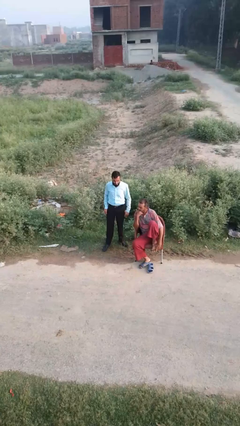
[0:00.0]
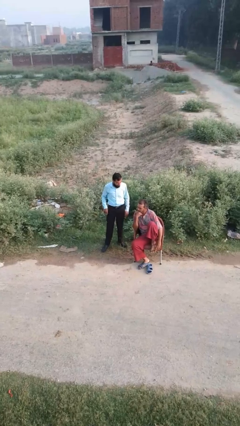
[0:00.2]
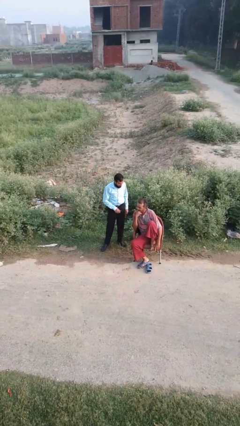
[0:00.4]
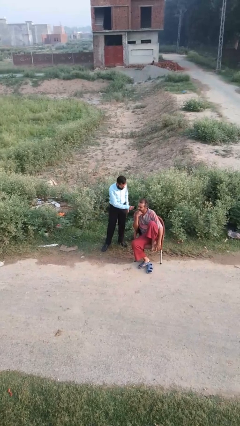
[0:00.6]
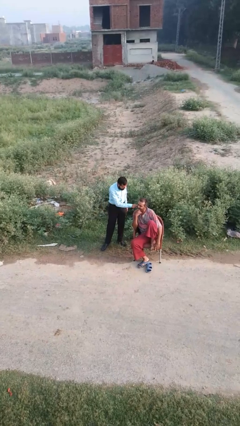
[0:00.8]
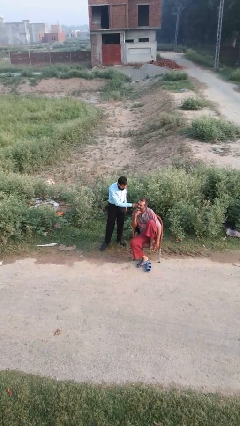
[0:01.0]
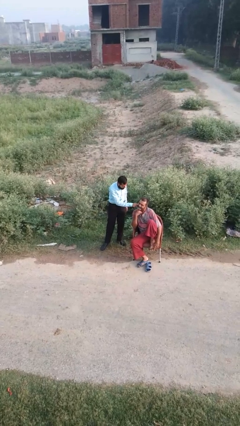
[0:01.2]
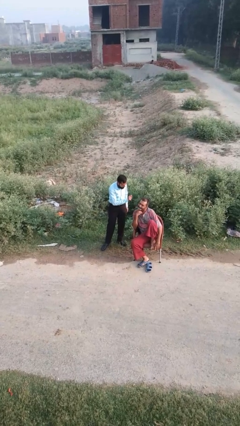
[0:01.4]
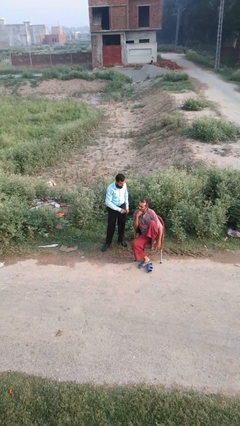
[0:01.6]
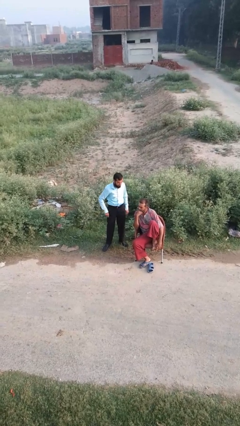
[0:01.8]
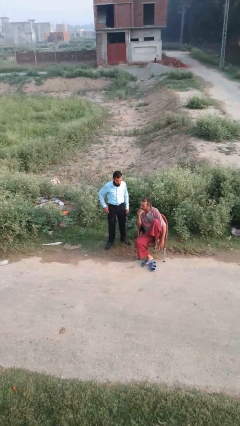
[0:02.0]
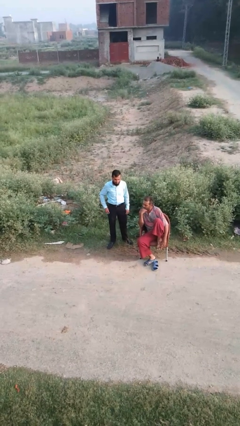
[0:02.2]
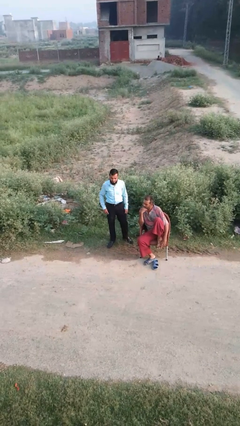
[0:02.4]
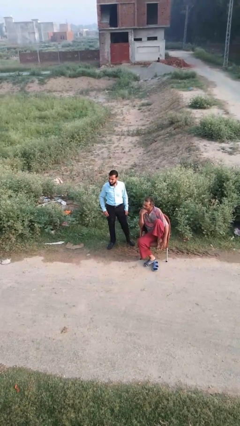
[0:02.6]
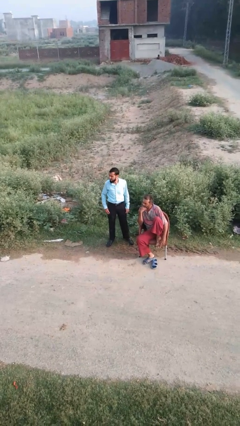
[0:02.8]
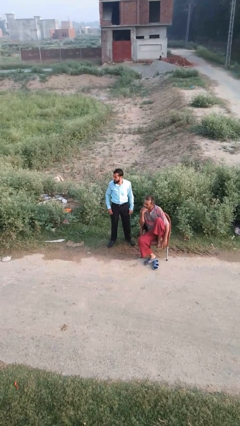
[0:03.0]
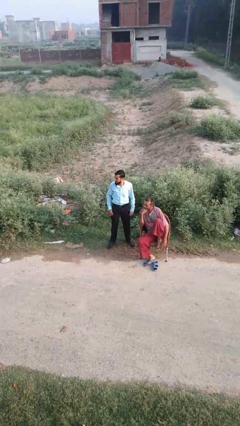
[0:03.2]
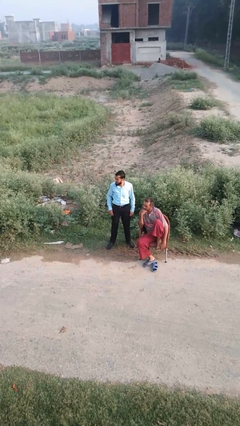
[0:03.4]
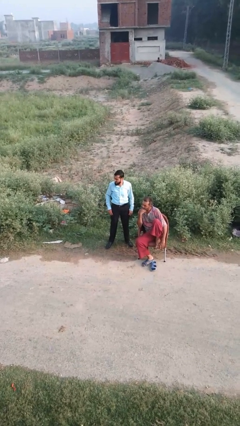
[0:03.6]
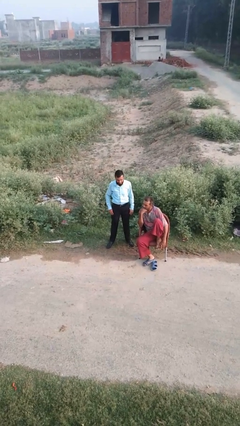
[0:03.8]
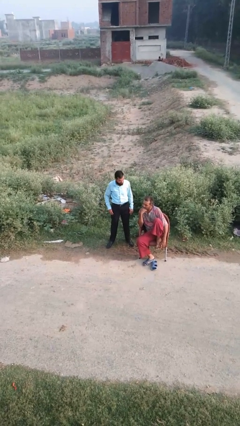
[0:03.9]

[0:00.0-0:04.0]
person touches face of person

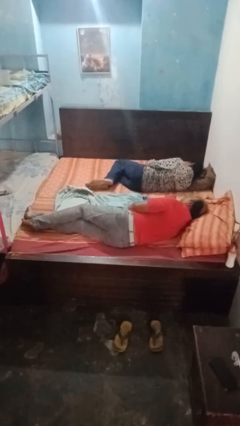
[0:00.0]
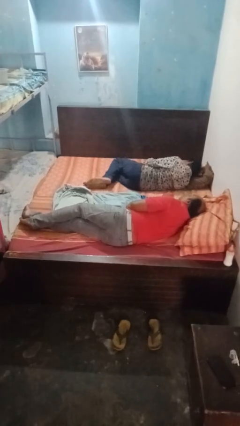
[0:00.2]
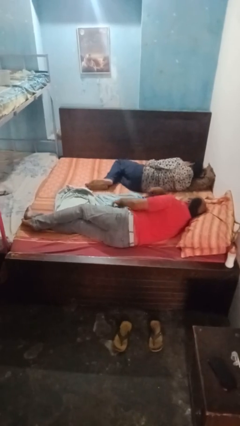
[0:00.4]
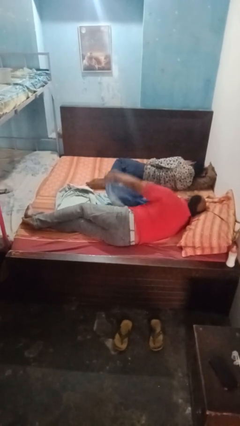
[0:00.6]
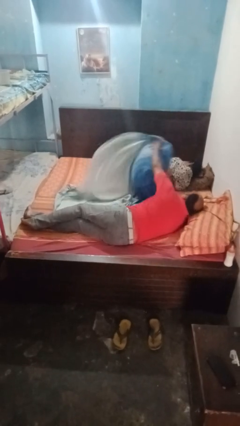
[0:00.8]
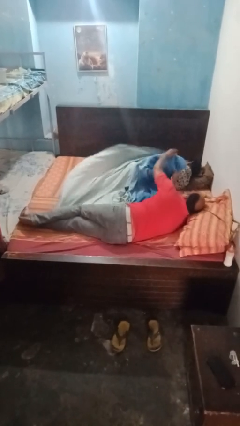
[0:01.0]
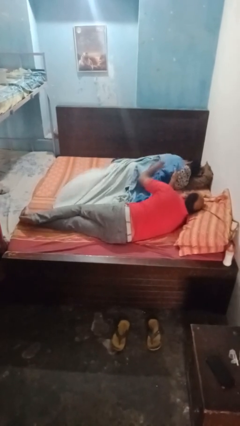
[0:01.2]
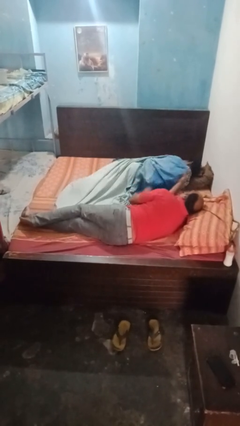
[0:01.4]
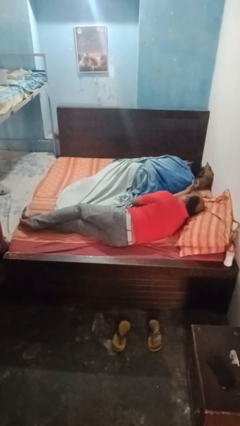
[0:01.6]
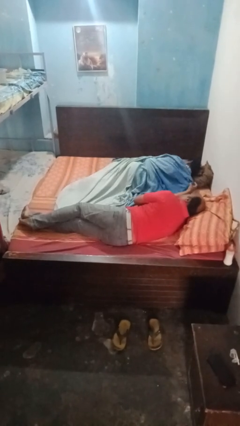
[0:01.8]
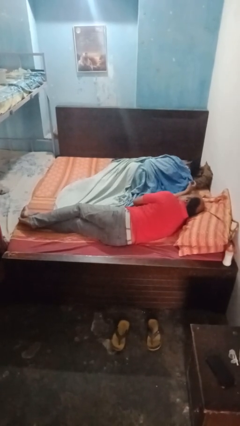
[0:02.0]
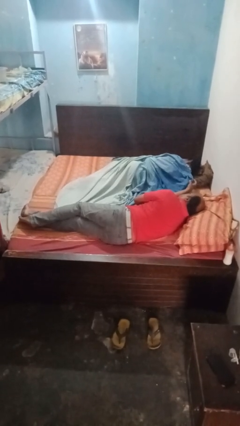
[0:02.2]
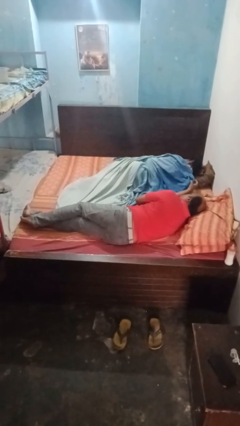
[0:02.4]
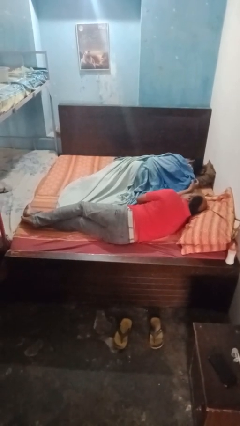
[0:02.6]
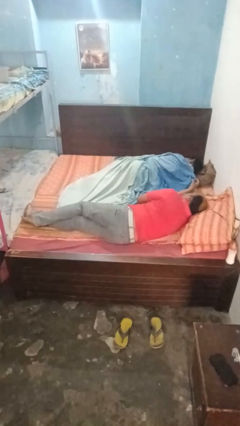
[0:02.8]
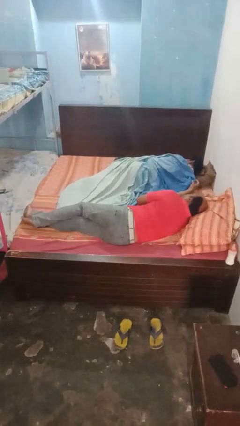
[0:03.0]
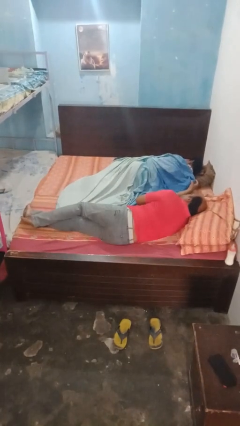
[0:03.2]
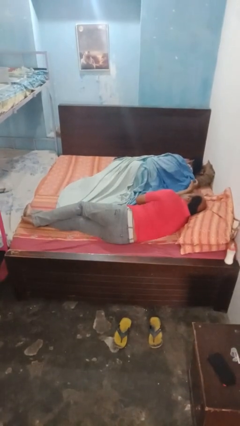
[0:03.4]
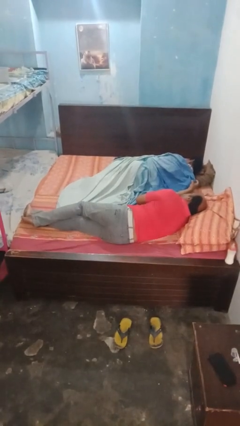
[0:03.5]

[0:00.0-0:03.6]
person covers friend with blanket

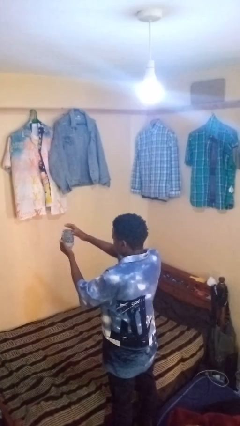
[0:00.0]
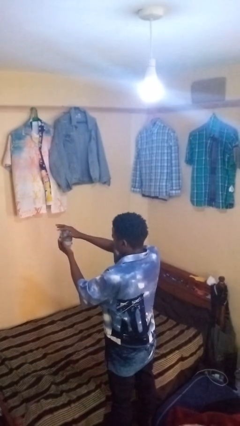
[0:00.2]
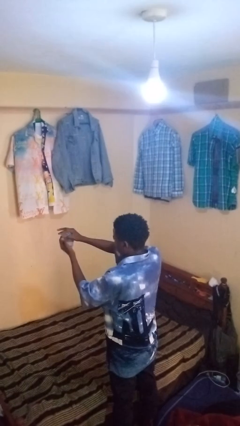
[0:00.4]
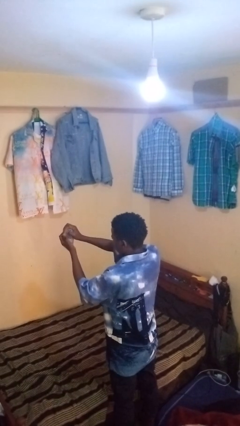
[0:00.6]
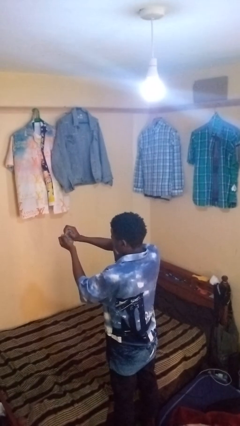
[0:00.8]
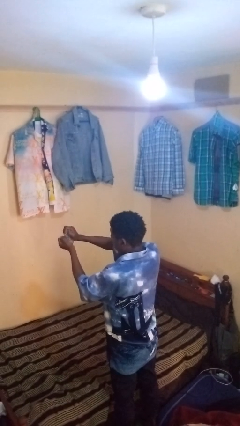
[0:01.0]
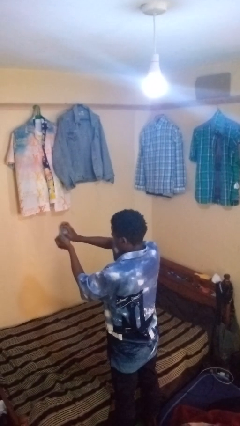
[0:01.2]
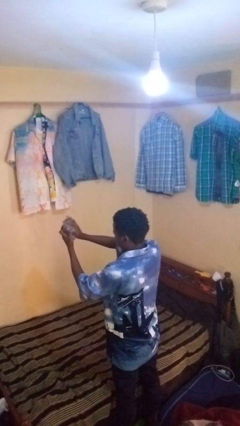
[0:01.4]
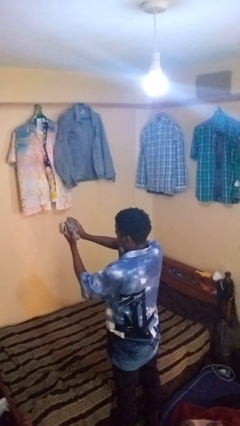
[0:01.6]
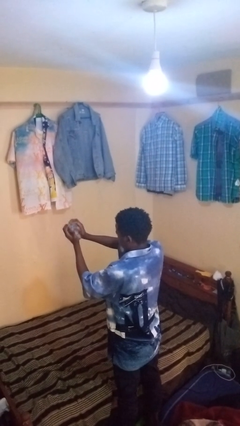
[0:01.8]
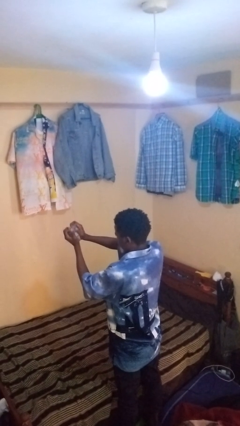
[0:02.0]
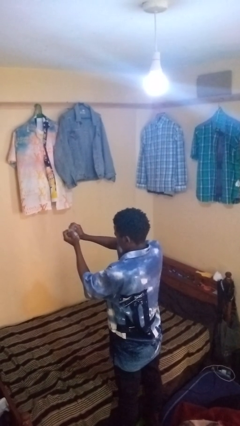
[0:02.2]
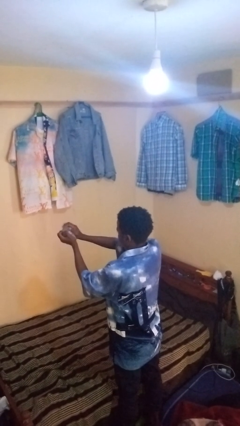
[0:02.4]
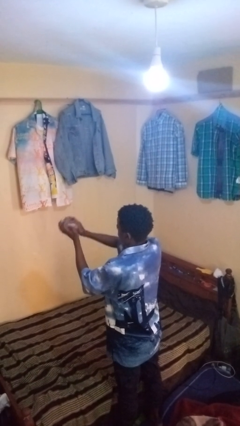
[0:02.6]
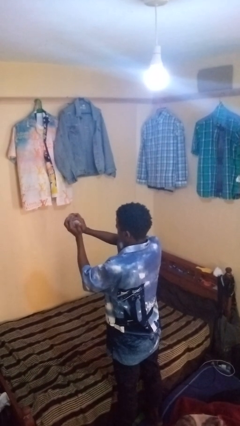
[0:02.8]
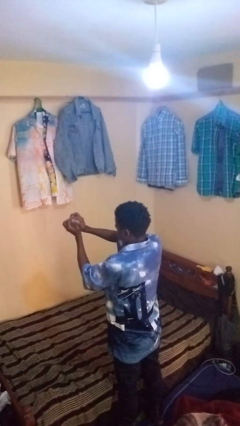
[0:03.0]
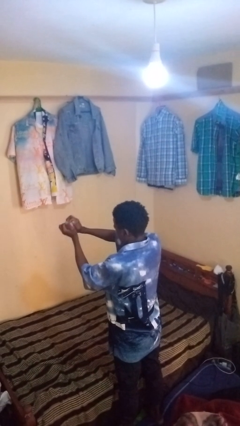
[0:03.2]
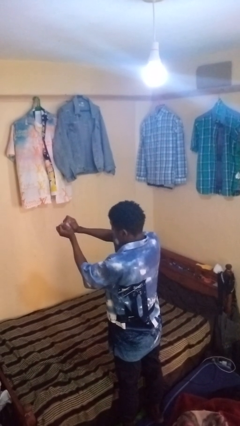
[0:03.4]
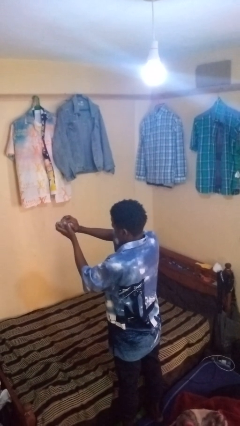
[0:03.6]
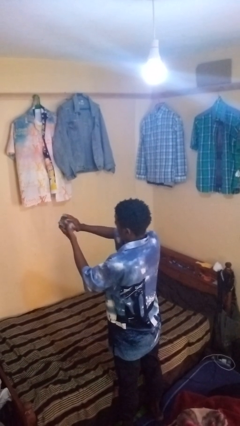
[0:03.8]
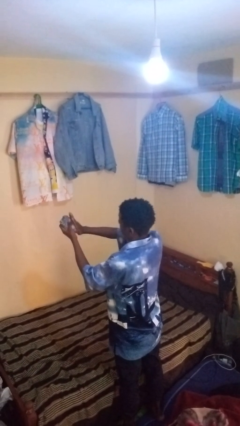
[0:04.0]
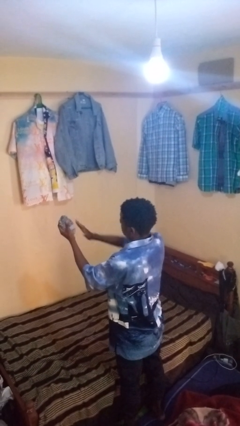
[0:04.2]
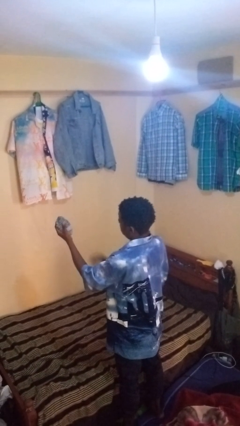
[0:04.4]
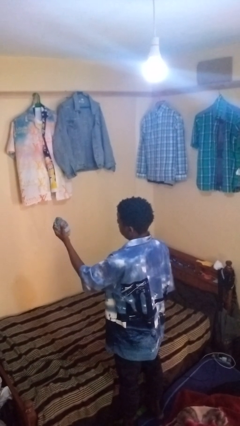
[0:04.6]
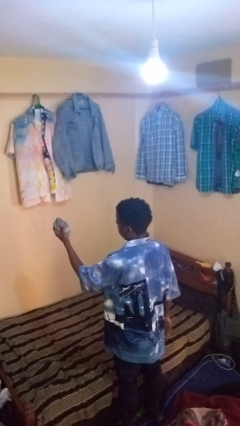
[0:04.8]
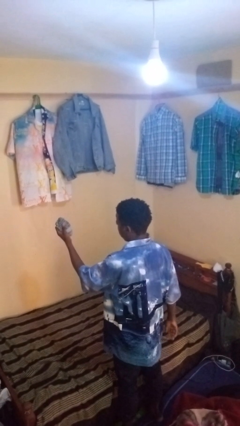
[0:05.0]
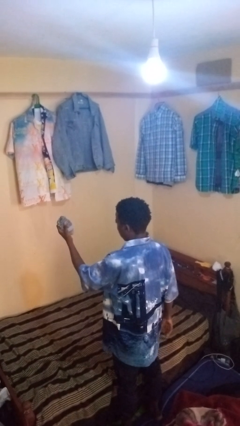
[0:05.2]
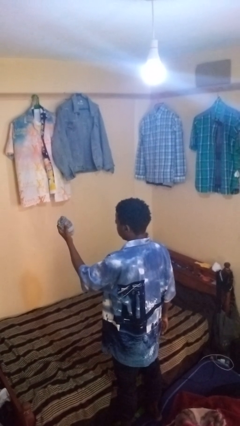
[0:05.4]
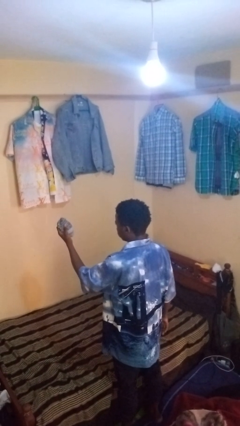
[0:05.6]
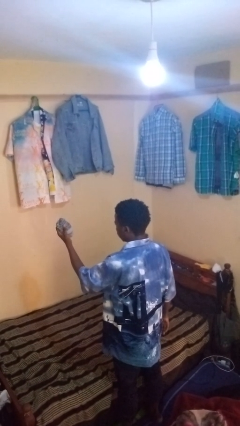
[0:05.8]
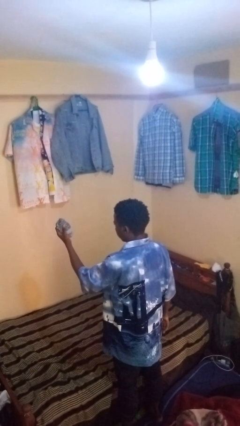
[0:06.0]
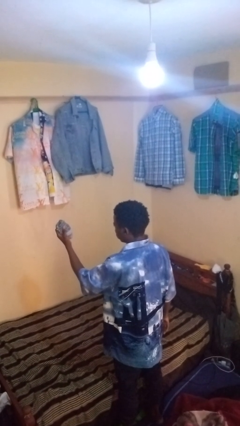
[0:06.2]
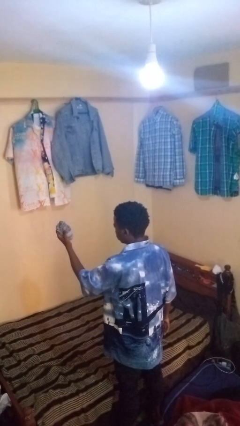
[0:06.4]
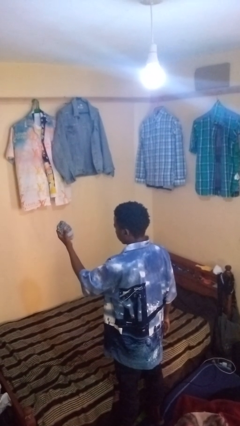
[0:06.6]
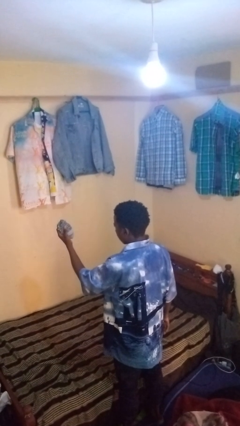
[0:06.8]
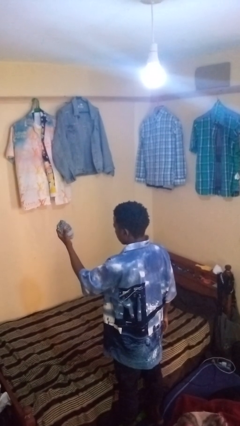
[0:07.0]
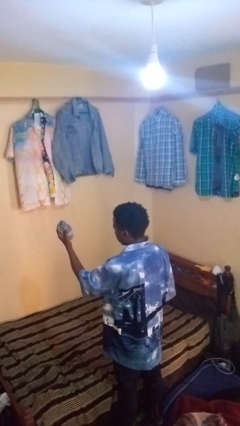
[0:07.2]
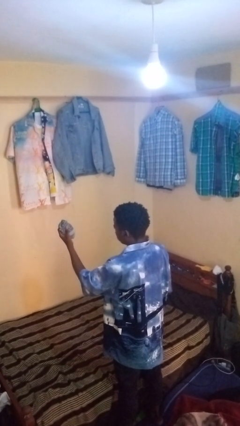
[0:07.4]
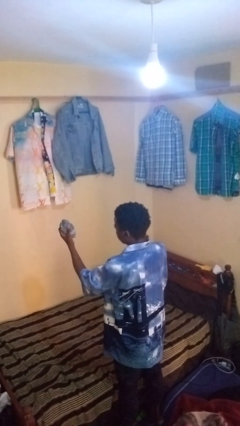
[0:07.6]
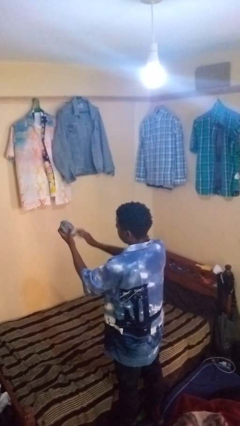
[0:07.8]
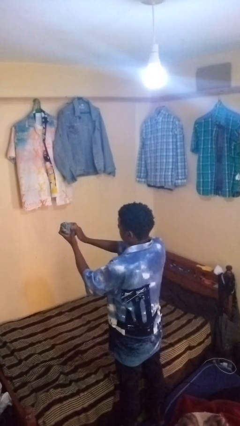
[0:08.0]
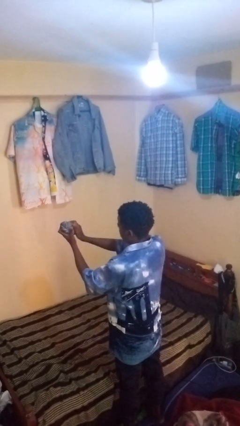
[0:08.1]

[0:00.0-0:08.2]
person squeezes object

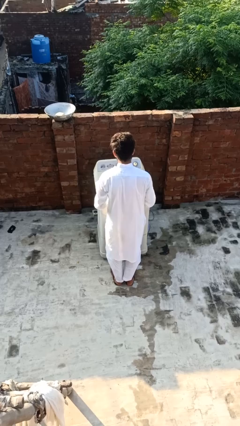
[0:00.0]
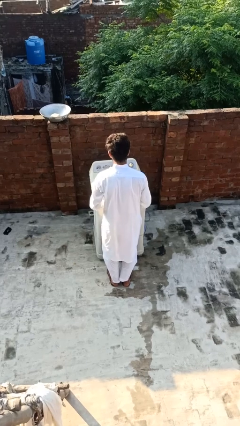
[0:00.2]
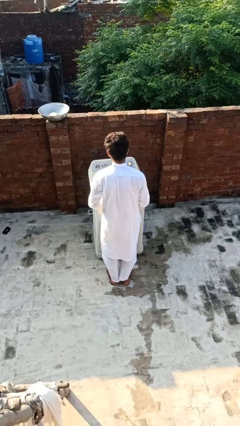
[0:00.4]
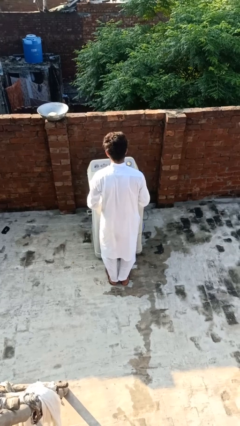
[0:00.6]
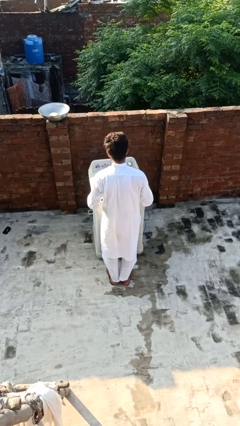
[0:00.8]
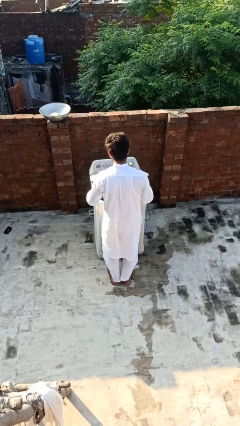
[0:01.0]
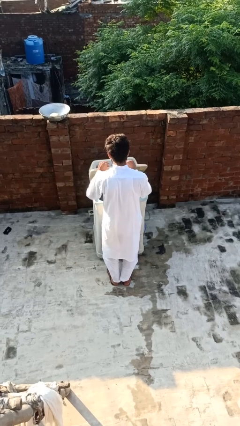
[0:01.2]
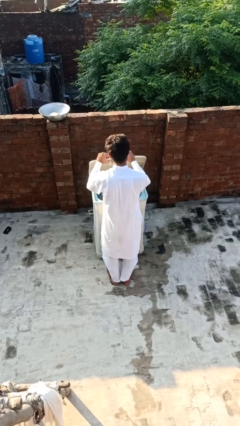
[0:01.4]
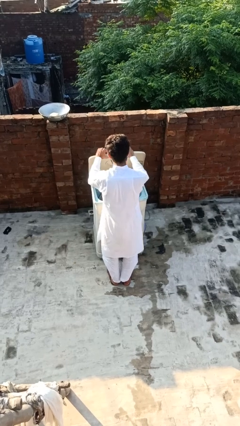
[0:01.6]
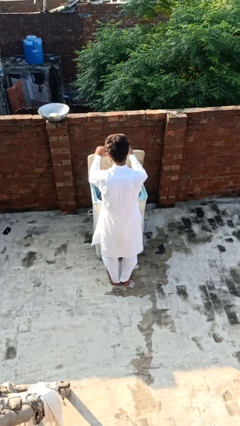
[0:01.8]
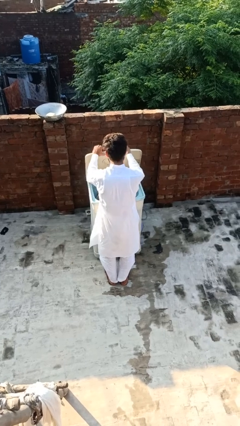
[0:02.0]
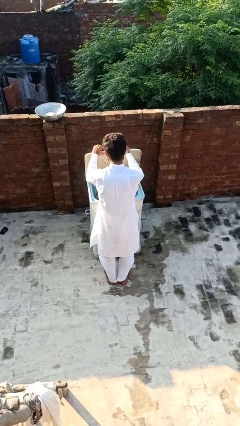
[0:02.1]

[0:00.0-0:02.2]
person opens clothes washer
